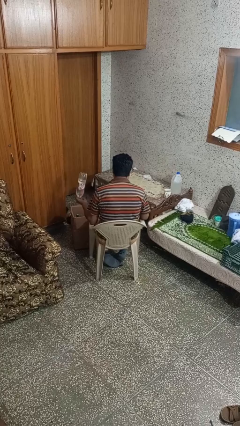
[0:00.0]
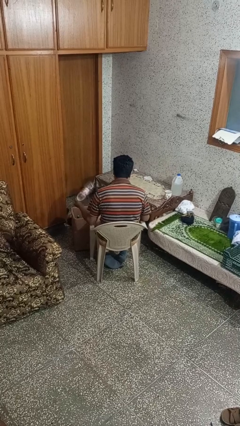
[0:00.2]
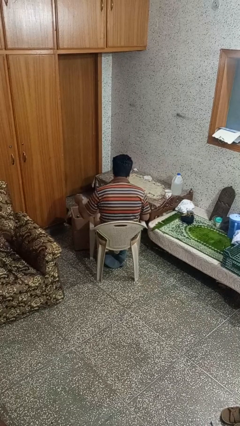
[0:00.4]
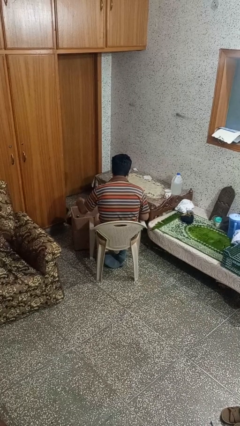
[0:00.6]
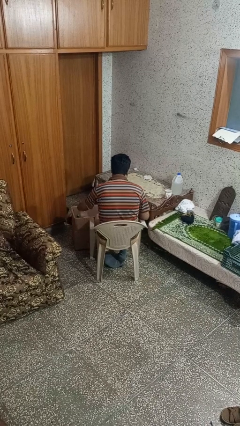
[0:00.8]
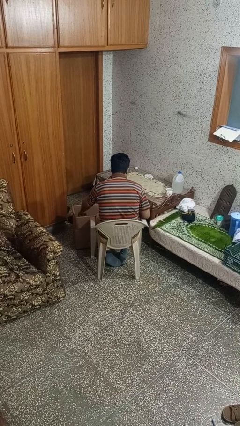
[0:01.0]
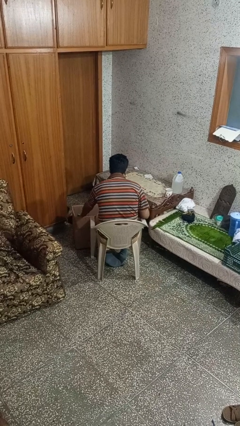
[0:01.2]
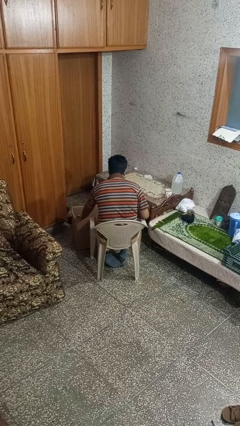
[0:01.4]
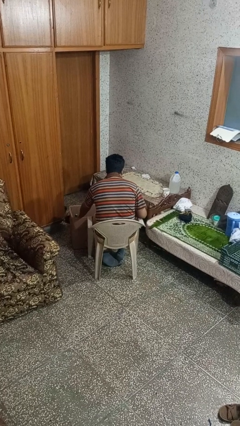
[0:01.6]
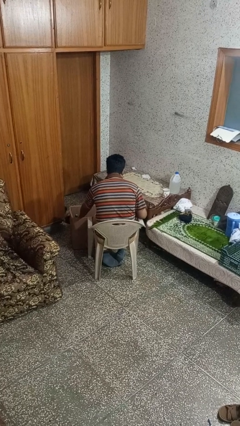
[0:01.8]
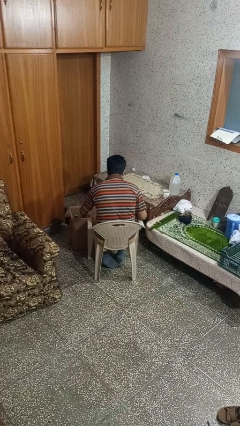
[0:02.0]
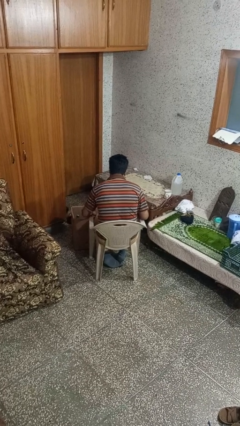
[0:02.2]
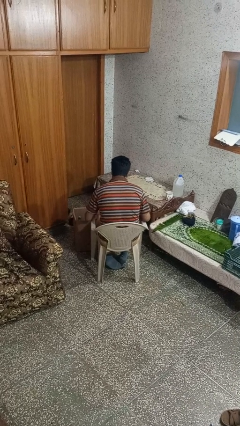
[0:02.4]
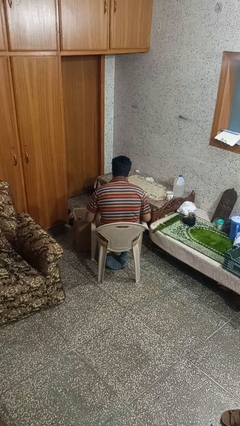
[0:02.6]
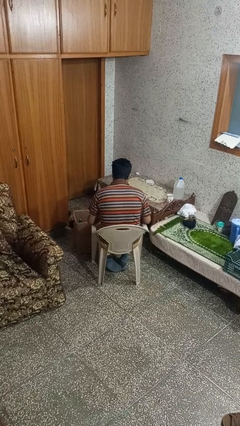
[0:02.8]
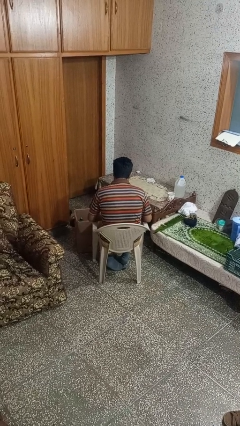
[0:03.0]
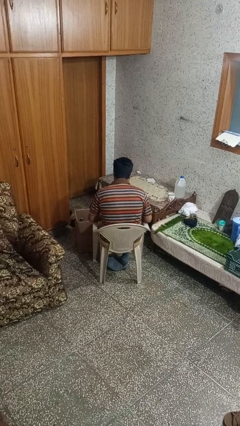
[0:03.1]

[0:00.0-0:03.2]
person puts object into box

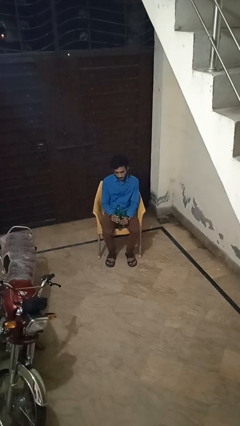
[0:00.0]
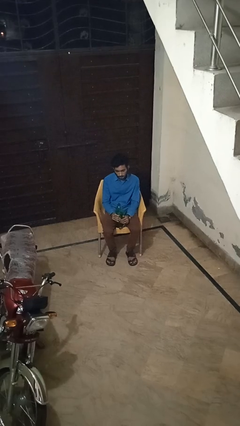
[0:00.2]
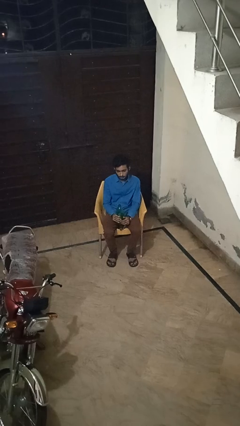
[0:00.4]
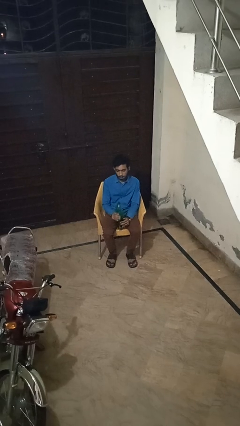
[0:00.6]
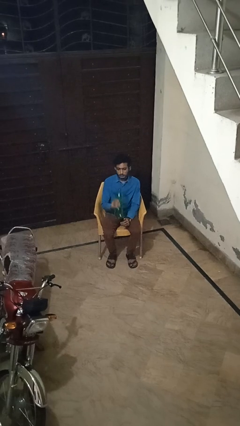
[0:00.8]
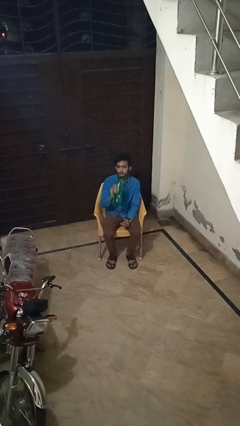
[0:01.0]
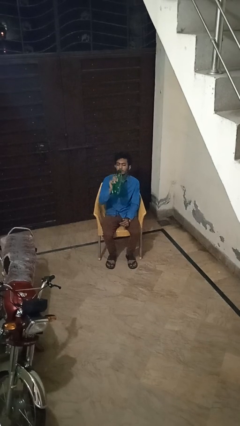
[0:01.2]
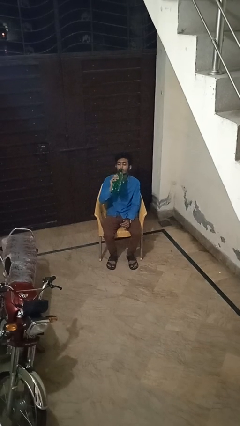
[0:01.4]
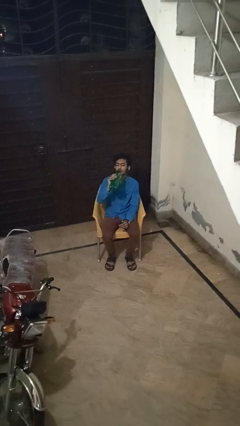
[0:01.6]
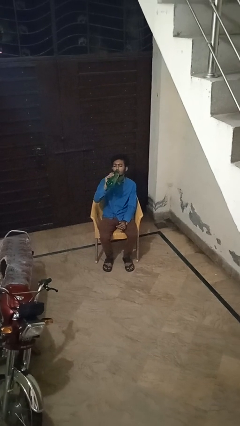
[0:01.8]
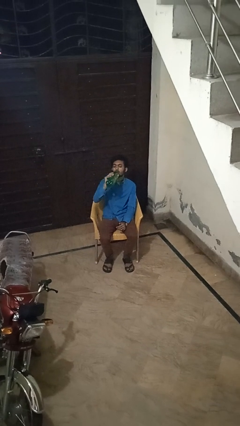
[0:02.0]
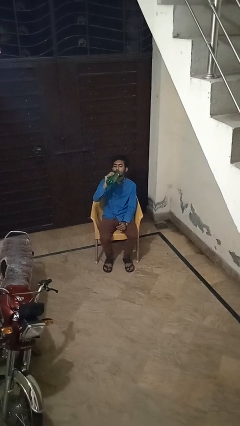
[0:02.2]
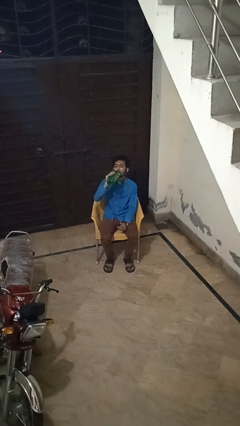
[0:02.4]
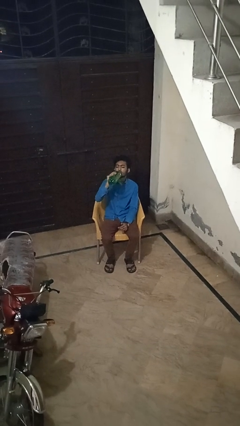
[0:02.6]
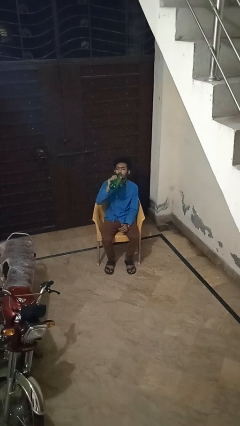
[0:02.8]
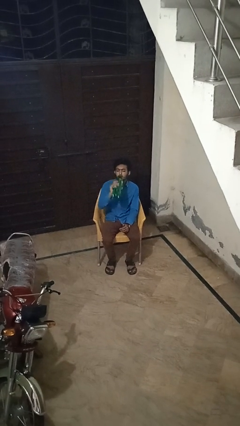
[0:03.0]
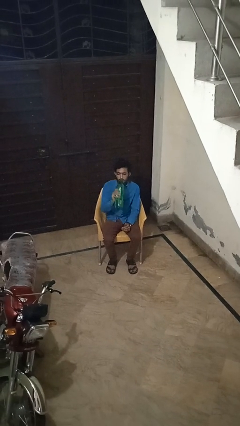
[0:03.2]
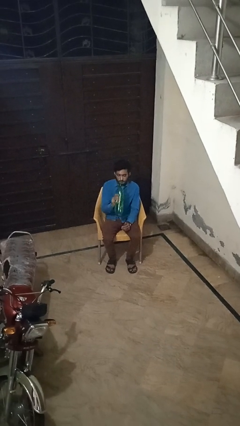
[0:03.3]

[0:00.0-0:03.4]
person drinks from bottle

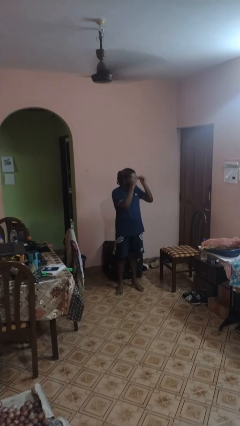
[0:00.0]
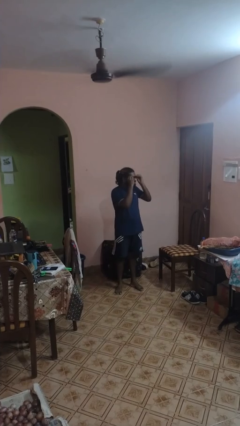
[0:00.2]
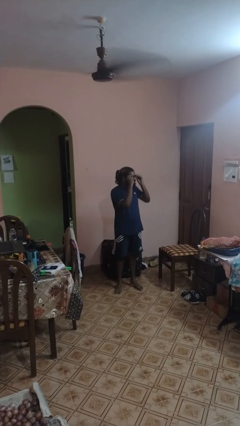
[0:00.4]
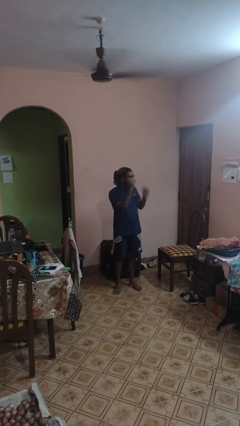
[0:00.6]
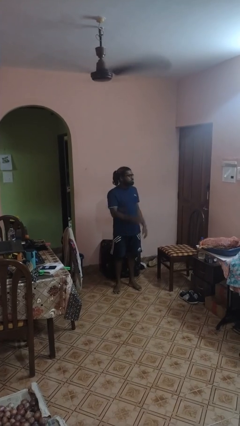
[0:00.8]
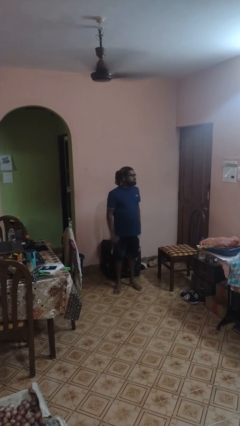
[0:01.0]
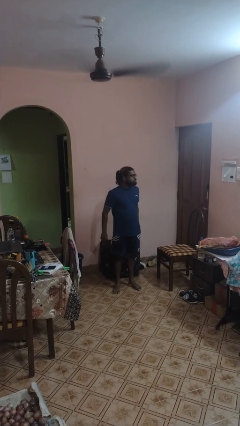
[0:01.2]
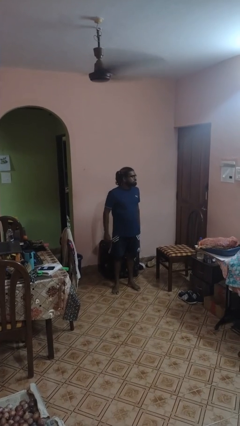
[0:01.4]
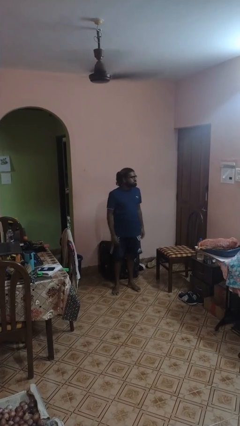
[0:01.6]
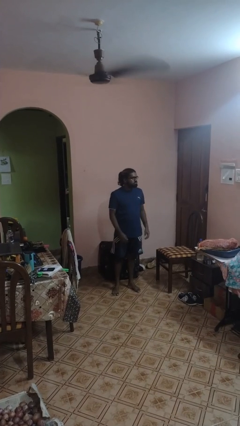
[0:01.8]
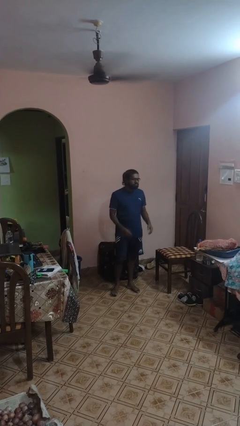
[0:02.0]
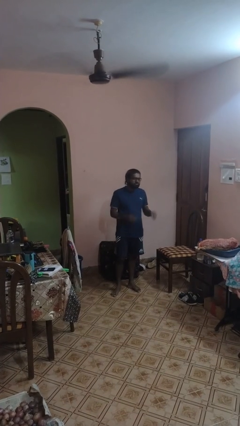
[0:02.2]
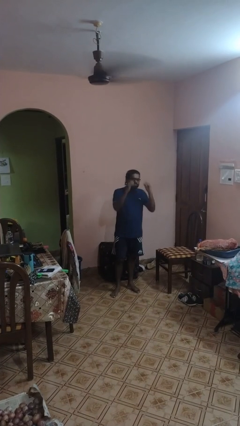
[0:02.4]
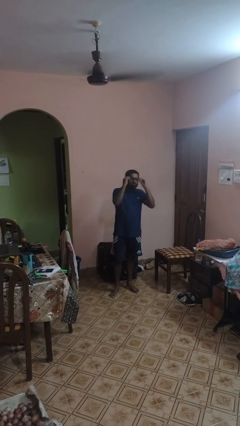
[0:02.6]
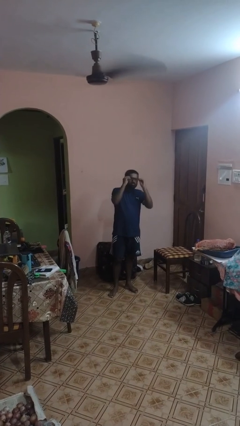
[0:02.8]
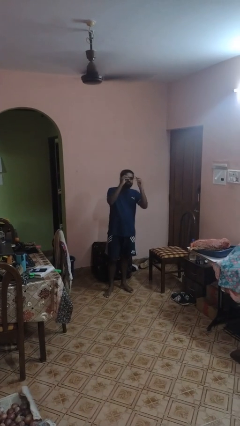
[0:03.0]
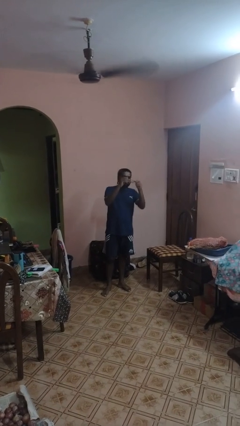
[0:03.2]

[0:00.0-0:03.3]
person puts on glasses

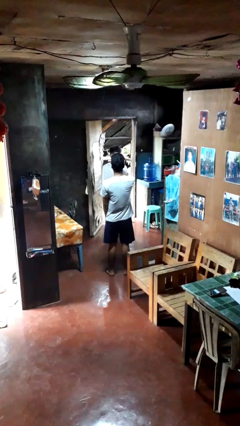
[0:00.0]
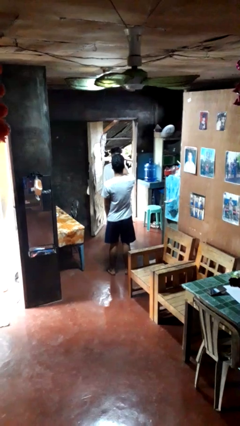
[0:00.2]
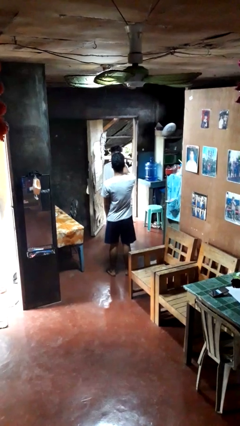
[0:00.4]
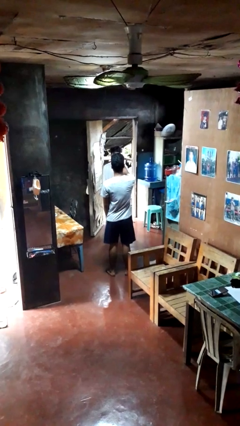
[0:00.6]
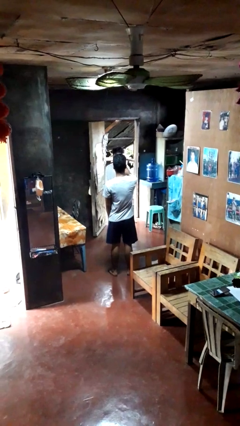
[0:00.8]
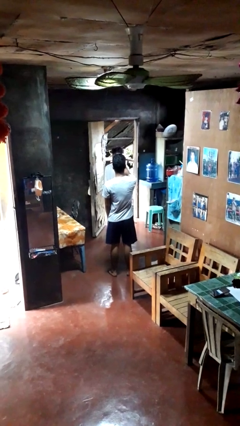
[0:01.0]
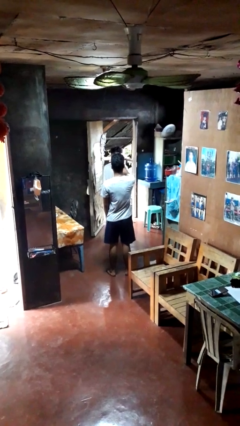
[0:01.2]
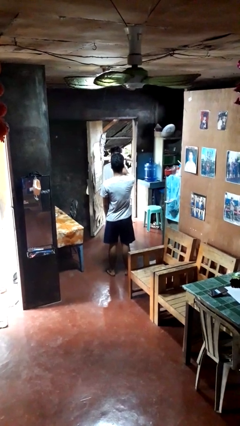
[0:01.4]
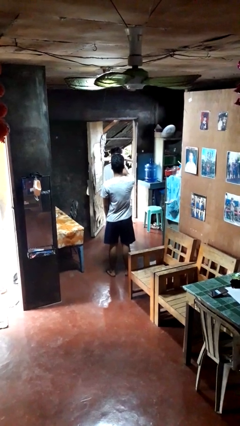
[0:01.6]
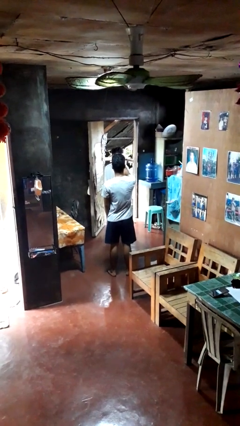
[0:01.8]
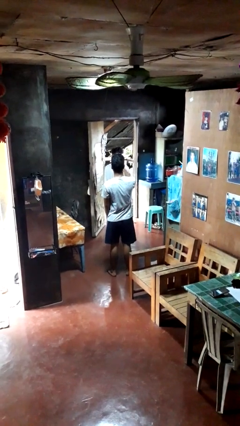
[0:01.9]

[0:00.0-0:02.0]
person points at person

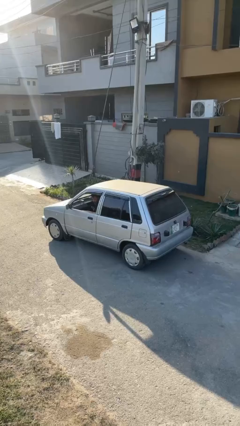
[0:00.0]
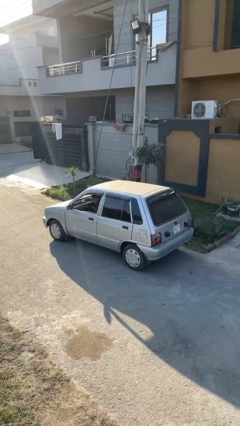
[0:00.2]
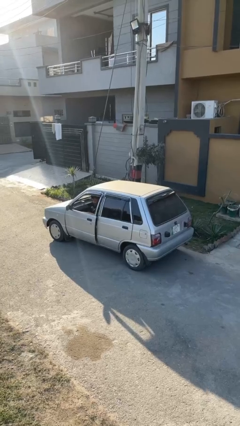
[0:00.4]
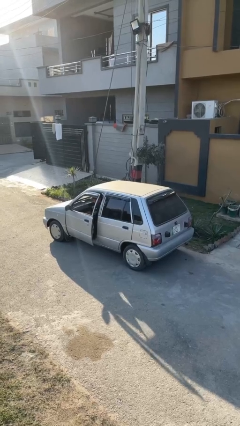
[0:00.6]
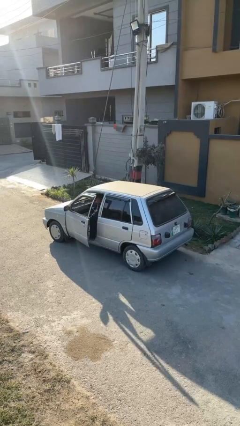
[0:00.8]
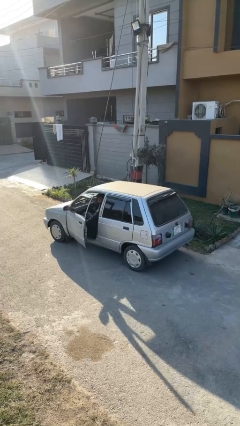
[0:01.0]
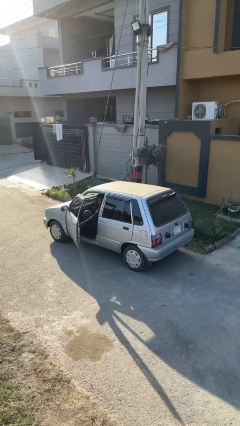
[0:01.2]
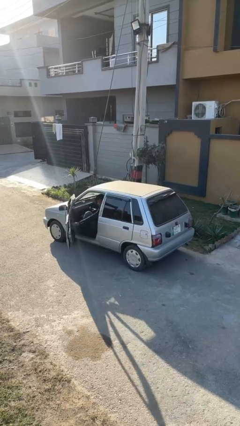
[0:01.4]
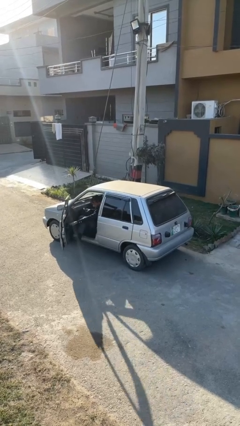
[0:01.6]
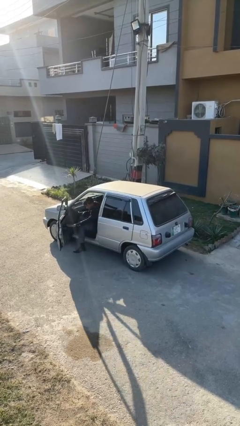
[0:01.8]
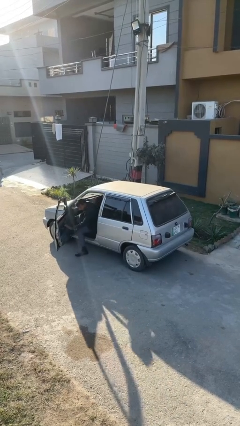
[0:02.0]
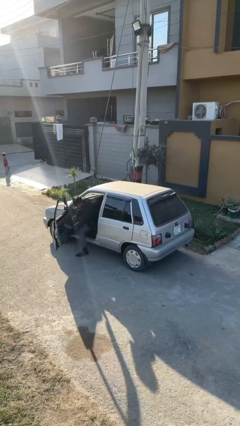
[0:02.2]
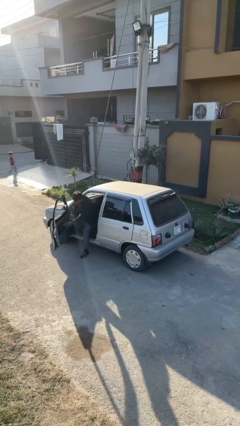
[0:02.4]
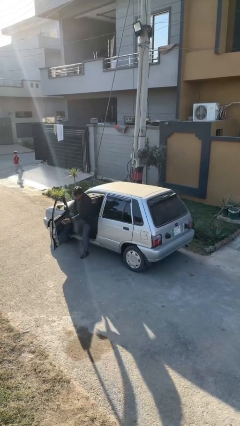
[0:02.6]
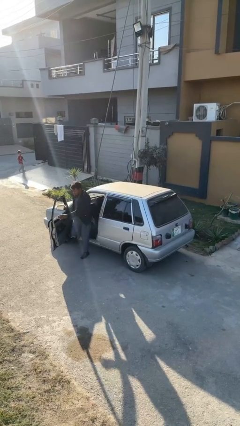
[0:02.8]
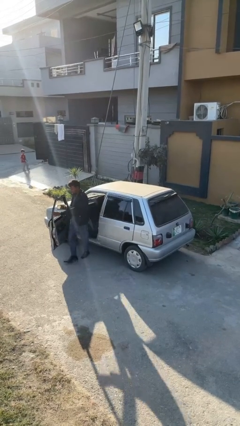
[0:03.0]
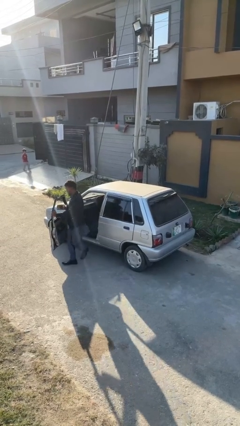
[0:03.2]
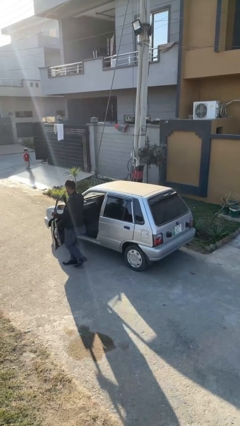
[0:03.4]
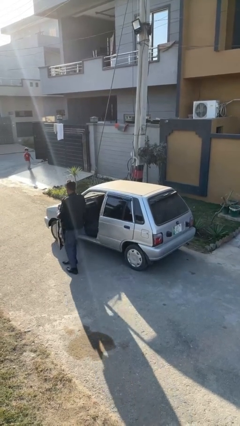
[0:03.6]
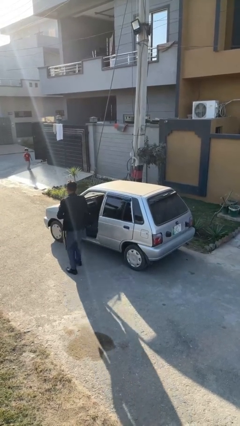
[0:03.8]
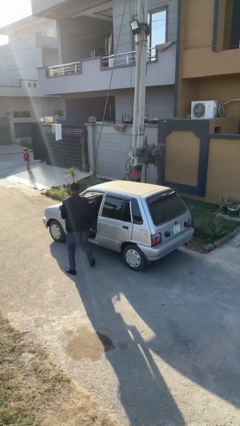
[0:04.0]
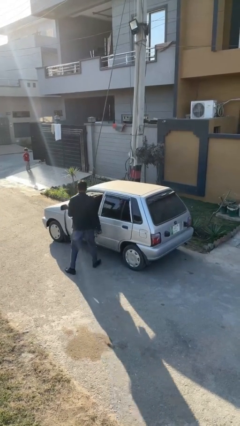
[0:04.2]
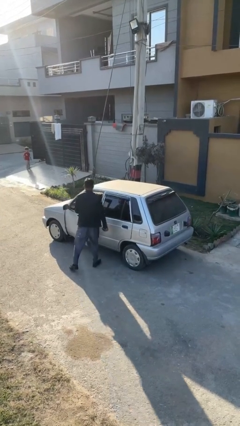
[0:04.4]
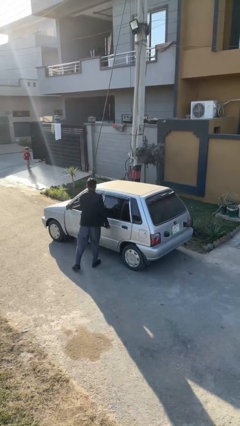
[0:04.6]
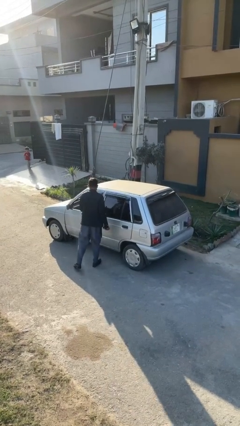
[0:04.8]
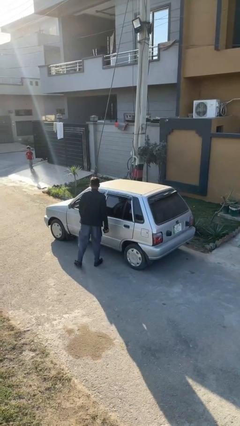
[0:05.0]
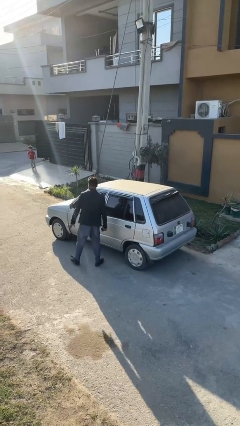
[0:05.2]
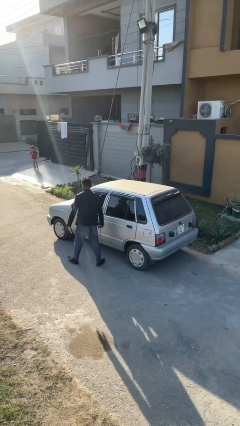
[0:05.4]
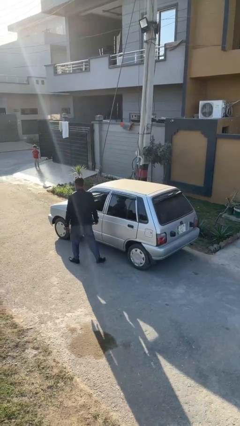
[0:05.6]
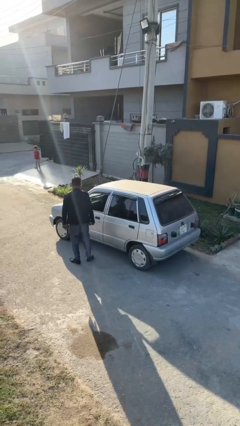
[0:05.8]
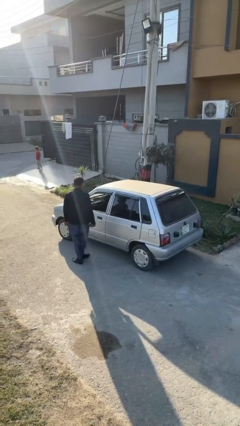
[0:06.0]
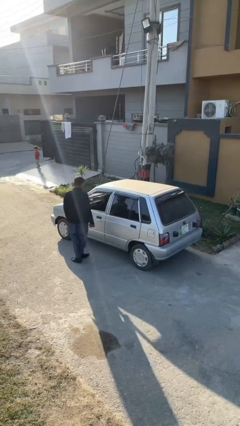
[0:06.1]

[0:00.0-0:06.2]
car drops off person

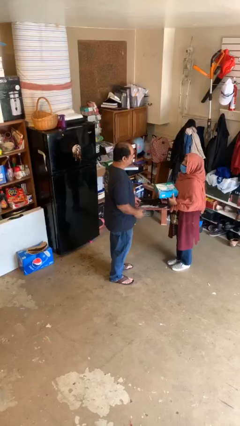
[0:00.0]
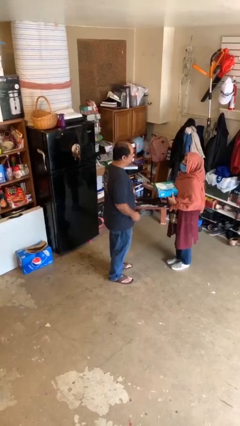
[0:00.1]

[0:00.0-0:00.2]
person transfers object to person
